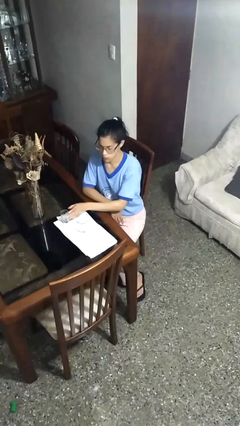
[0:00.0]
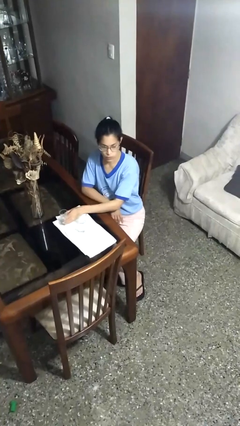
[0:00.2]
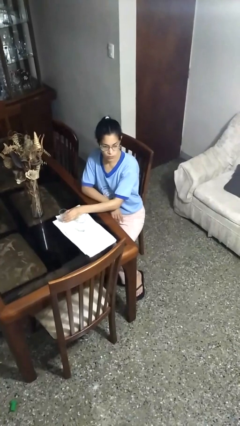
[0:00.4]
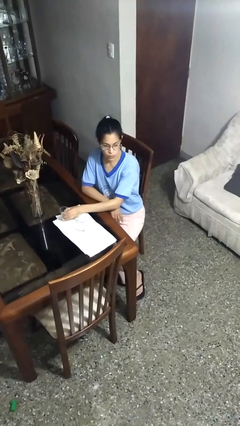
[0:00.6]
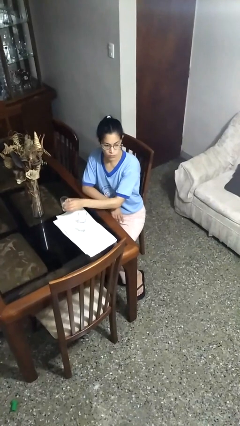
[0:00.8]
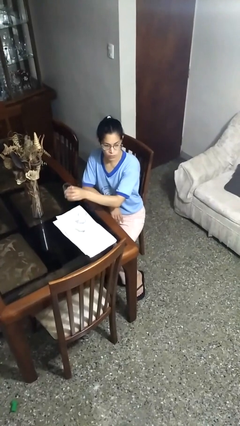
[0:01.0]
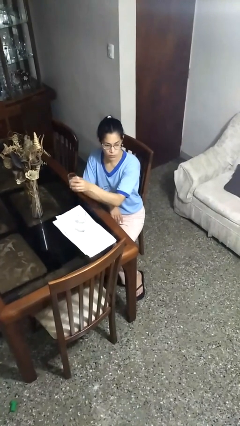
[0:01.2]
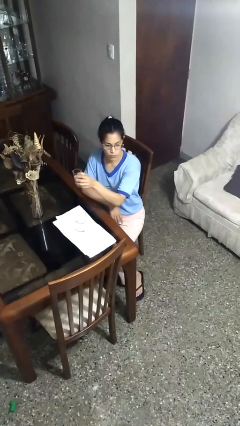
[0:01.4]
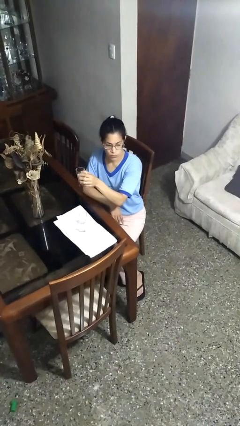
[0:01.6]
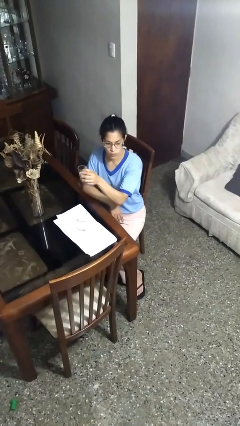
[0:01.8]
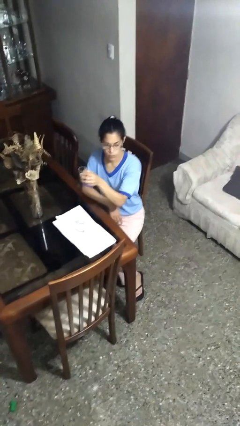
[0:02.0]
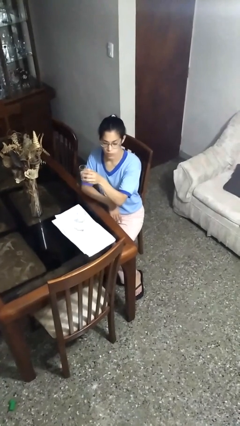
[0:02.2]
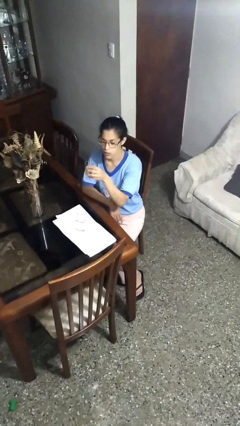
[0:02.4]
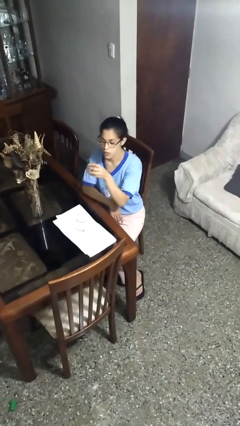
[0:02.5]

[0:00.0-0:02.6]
person picks up object from table

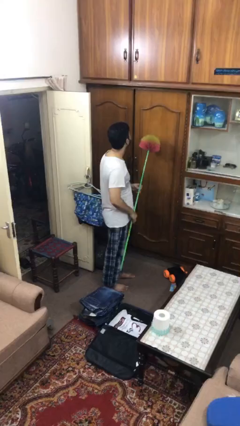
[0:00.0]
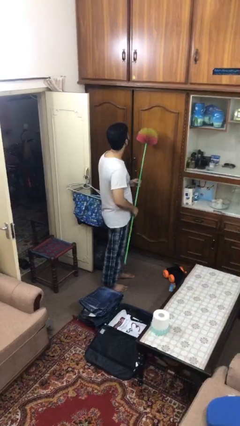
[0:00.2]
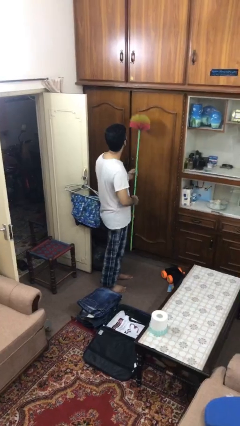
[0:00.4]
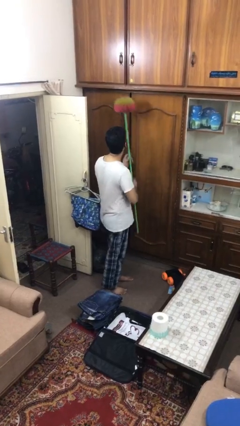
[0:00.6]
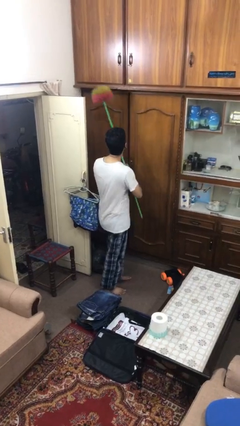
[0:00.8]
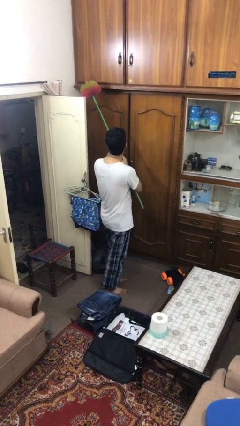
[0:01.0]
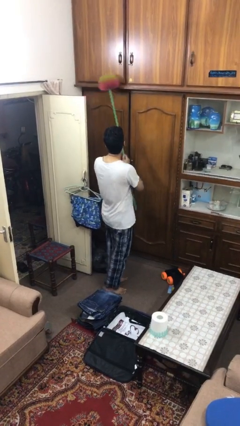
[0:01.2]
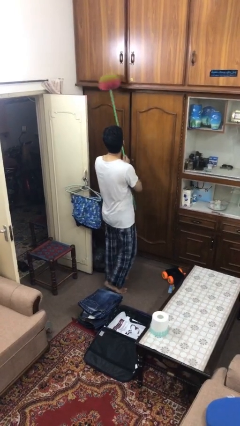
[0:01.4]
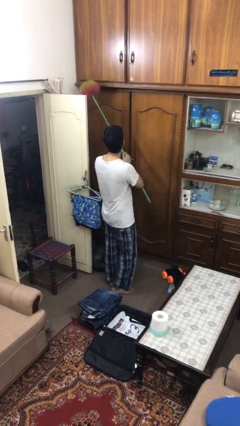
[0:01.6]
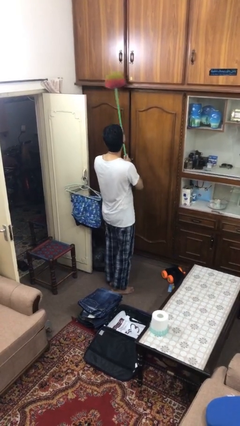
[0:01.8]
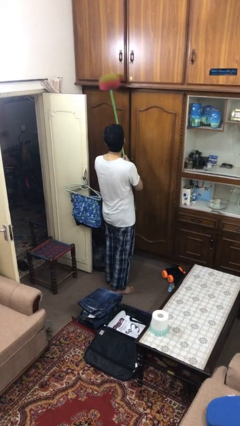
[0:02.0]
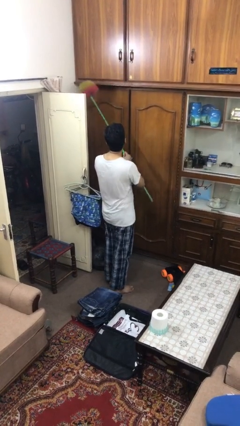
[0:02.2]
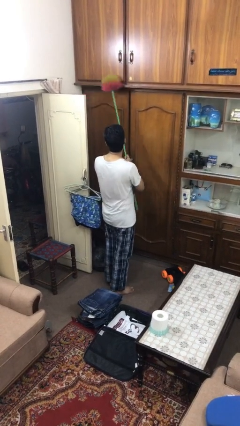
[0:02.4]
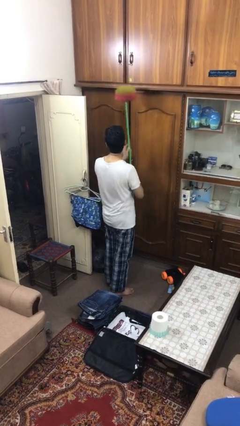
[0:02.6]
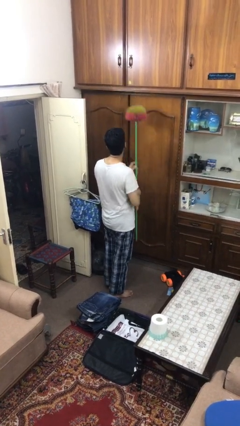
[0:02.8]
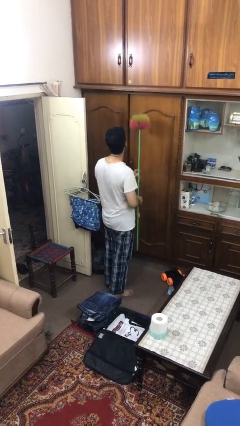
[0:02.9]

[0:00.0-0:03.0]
person dusts furniture

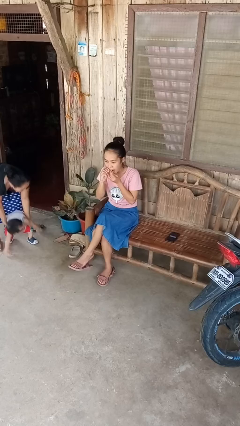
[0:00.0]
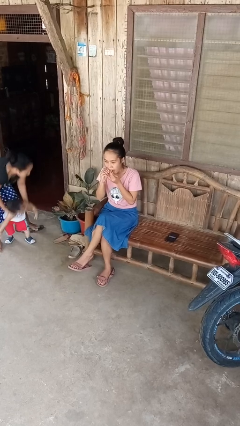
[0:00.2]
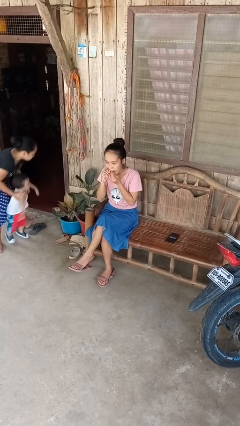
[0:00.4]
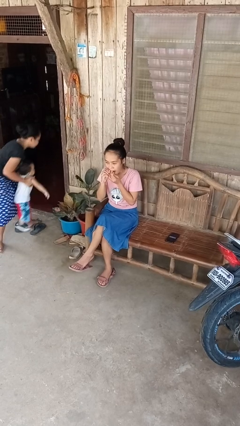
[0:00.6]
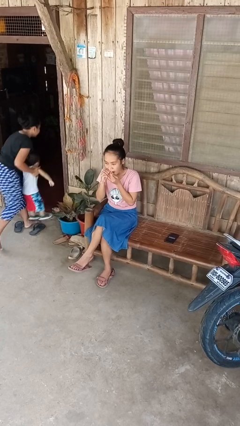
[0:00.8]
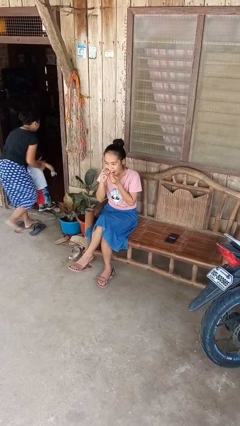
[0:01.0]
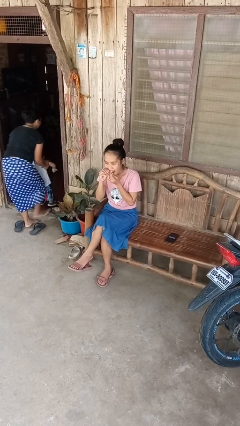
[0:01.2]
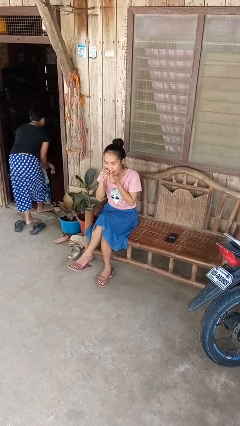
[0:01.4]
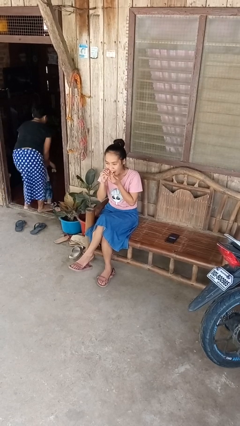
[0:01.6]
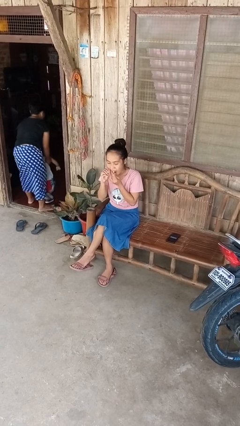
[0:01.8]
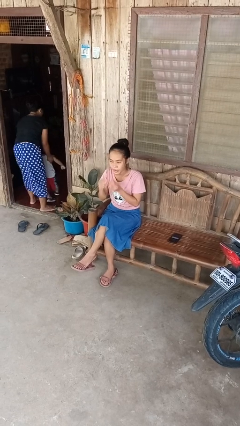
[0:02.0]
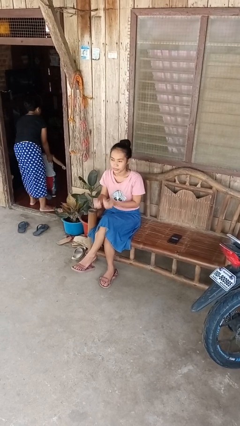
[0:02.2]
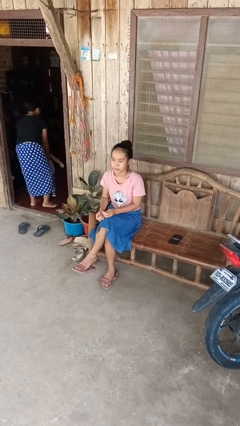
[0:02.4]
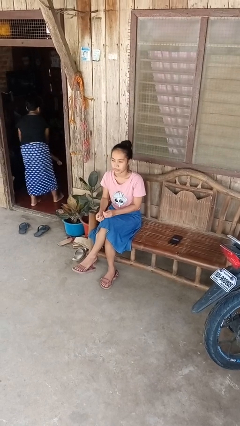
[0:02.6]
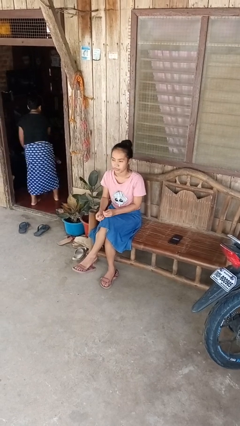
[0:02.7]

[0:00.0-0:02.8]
person flosses

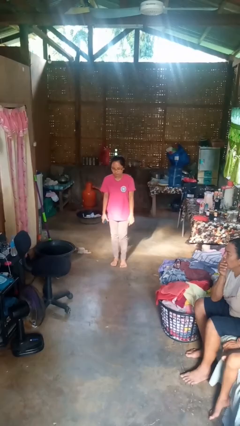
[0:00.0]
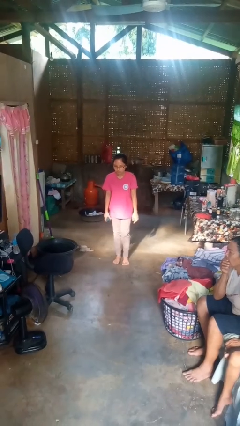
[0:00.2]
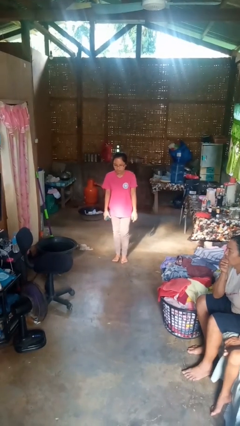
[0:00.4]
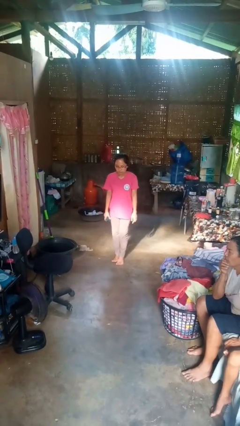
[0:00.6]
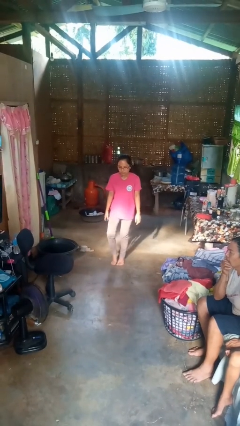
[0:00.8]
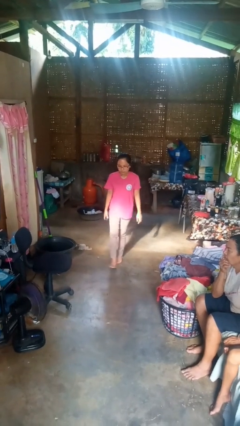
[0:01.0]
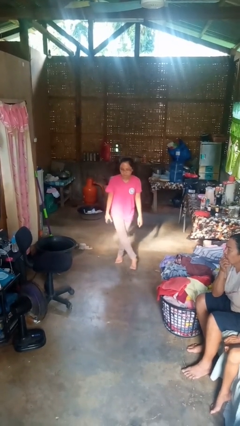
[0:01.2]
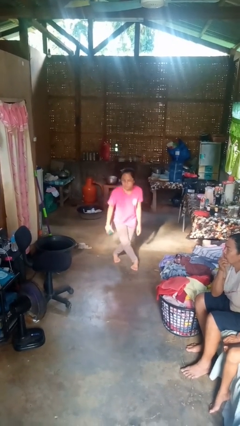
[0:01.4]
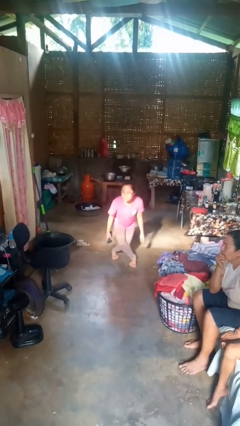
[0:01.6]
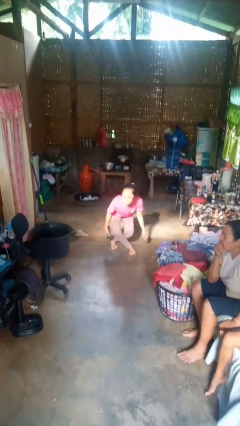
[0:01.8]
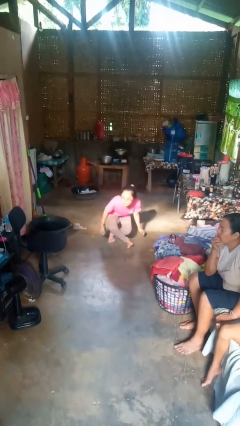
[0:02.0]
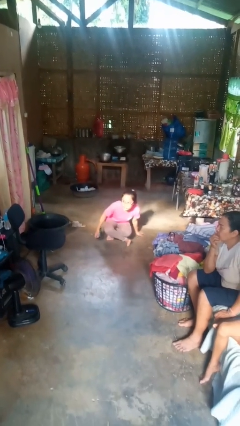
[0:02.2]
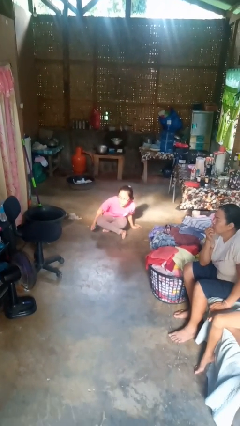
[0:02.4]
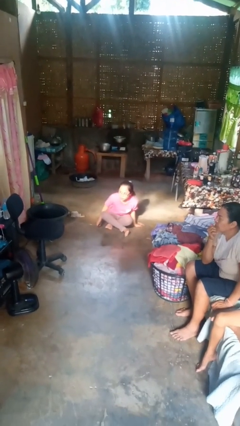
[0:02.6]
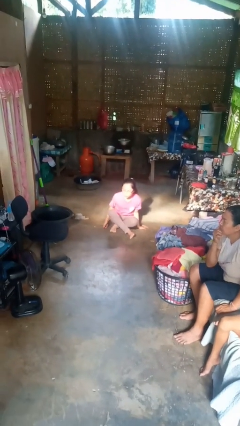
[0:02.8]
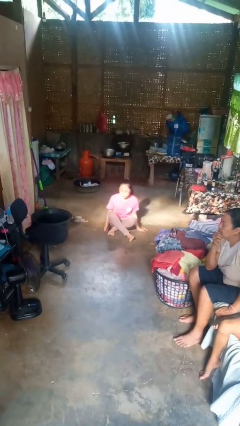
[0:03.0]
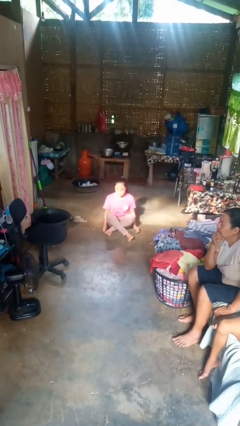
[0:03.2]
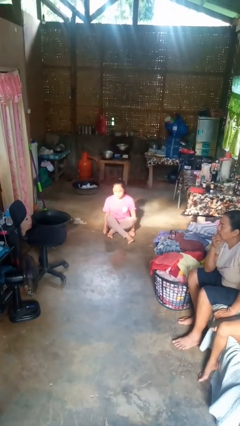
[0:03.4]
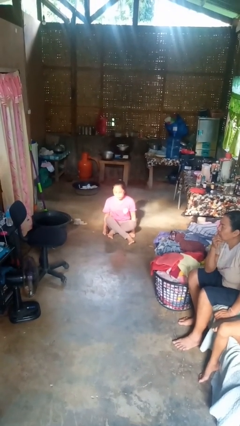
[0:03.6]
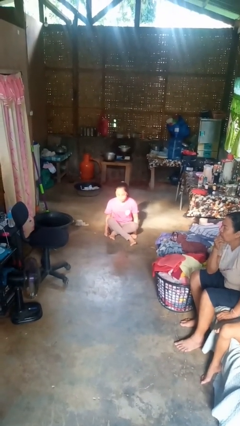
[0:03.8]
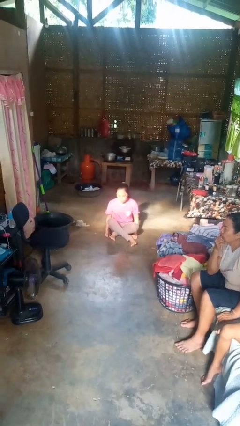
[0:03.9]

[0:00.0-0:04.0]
person sits crisscross

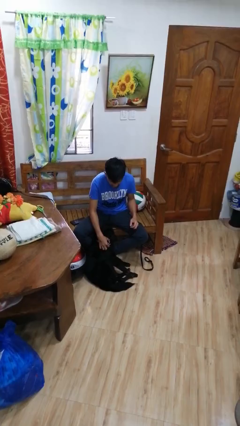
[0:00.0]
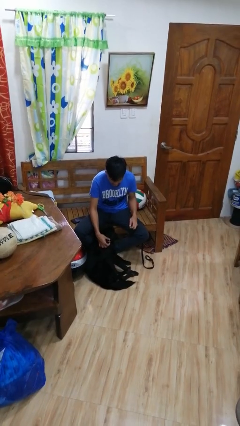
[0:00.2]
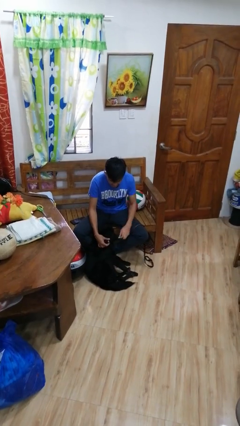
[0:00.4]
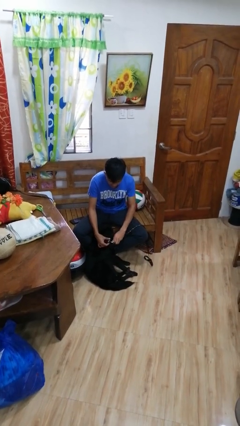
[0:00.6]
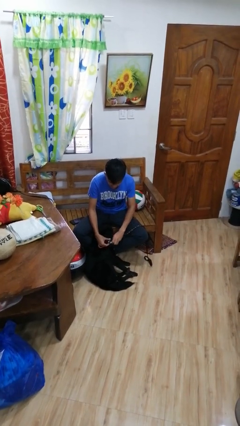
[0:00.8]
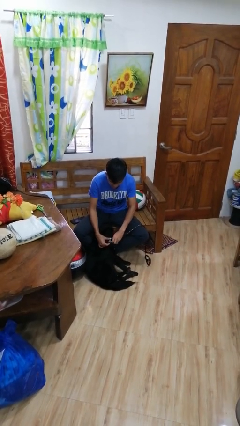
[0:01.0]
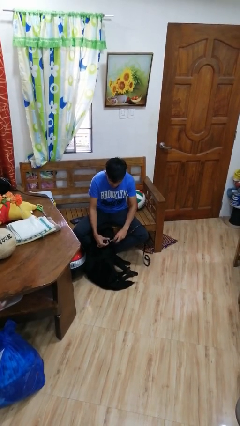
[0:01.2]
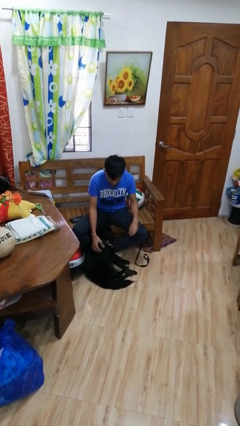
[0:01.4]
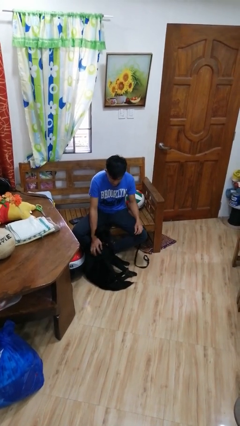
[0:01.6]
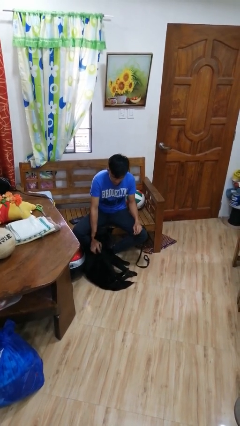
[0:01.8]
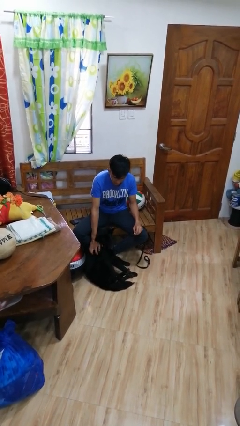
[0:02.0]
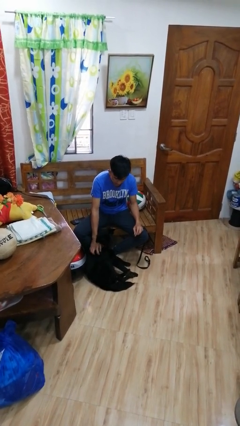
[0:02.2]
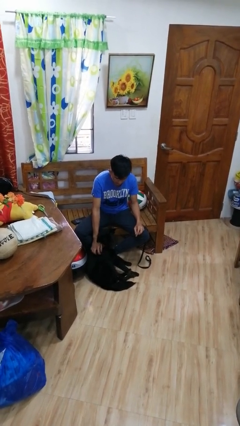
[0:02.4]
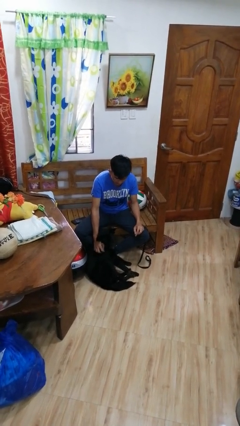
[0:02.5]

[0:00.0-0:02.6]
person attaches leash to dog

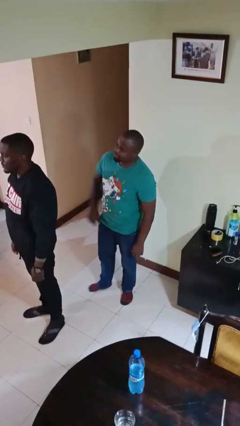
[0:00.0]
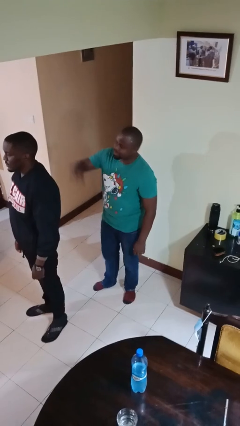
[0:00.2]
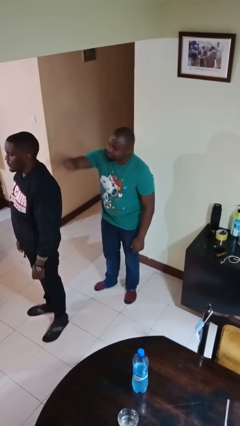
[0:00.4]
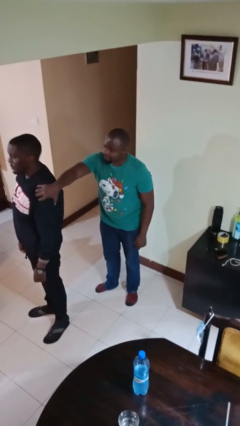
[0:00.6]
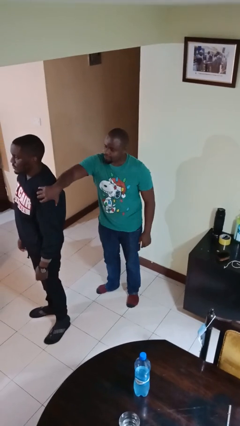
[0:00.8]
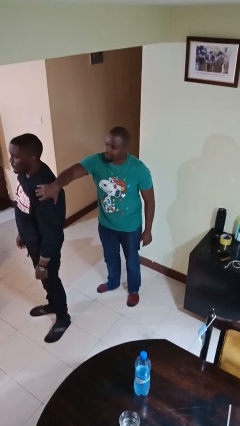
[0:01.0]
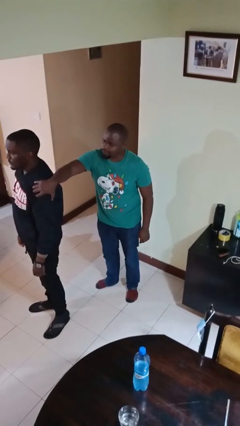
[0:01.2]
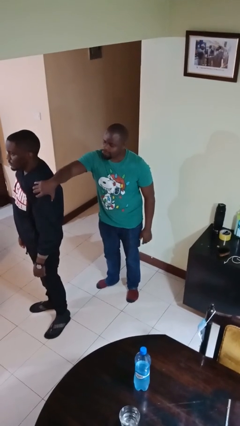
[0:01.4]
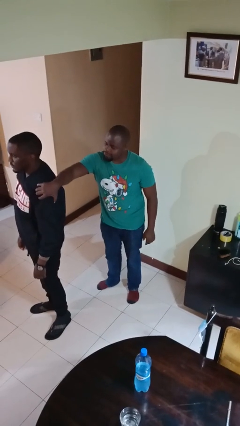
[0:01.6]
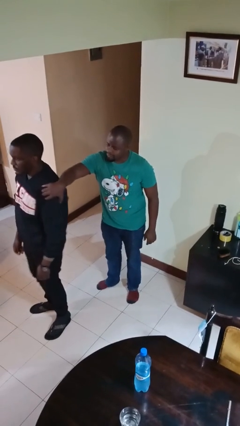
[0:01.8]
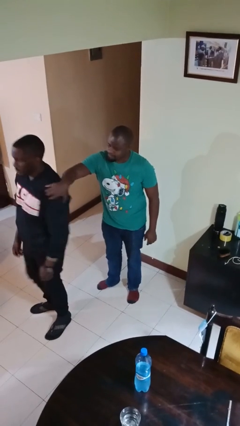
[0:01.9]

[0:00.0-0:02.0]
person grabs person by shoulder

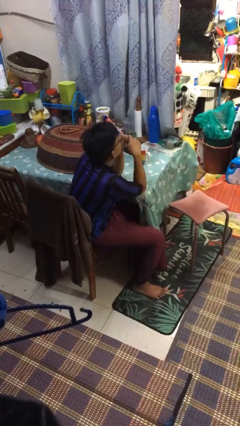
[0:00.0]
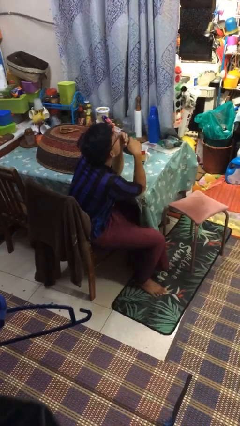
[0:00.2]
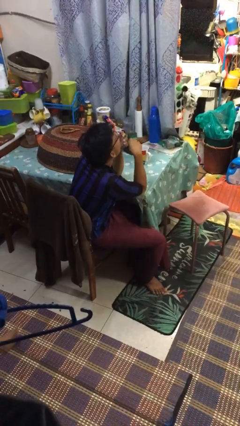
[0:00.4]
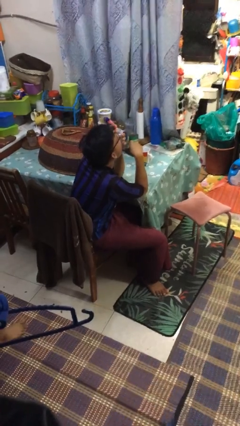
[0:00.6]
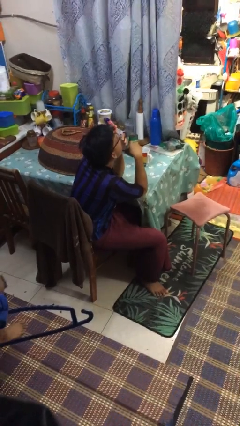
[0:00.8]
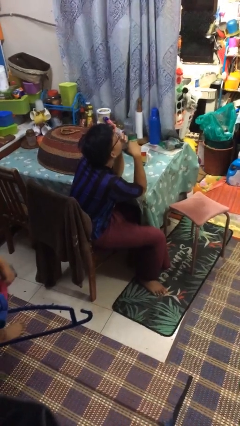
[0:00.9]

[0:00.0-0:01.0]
person yawns
